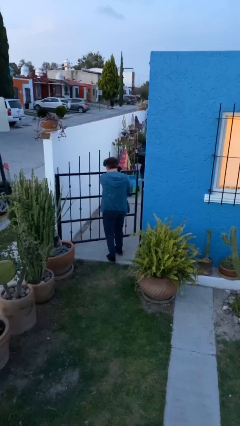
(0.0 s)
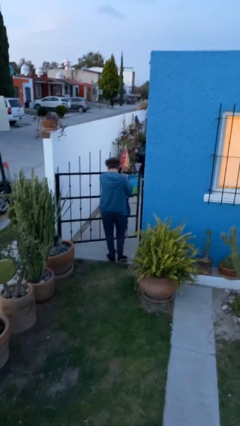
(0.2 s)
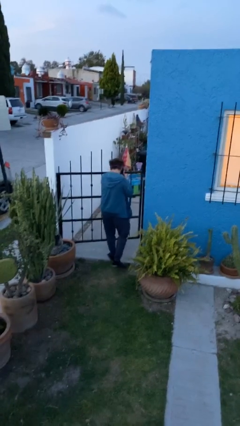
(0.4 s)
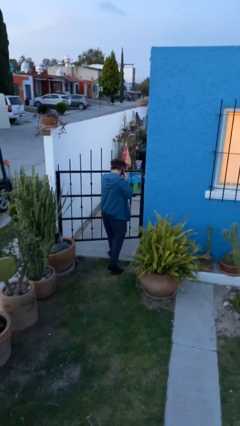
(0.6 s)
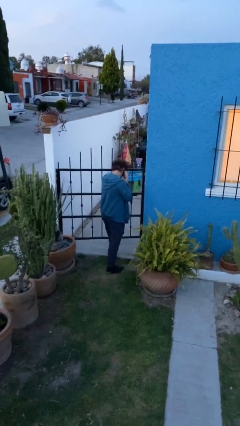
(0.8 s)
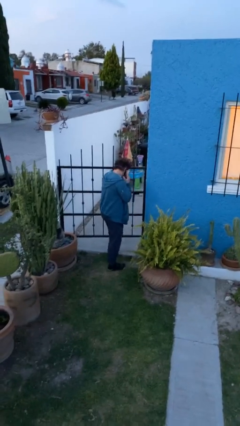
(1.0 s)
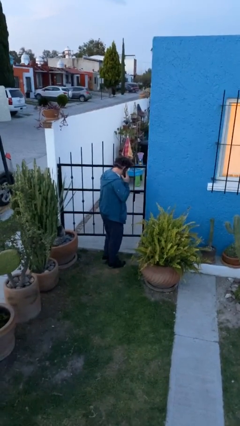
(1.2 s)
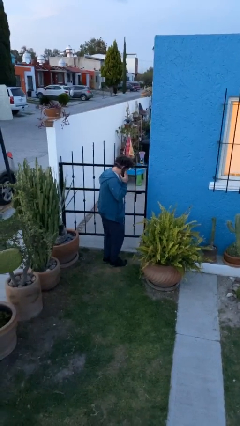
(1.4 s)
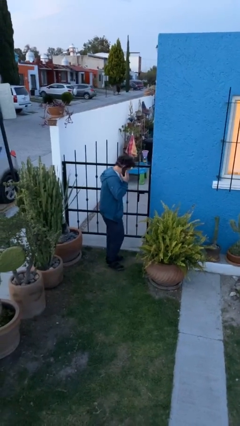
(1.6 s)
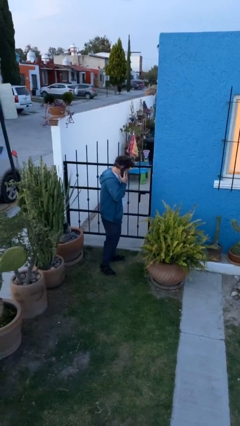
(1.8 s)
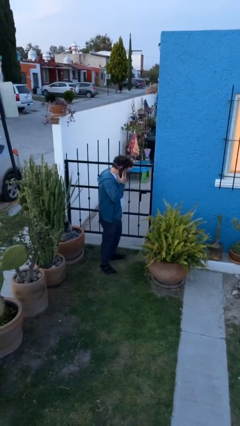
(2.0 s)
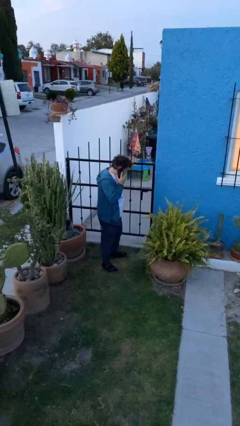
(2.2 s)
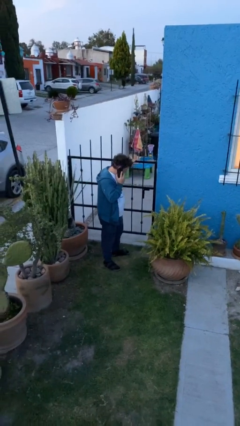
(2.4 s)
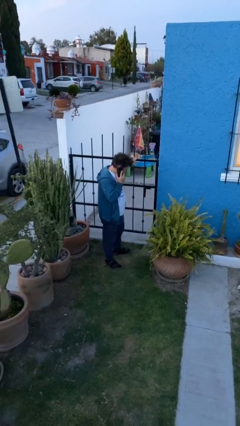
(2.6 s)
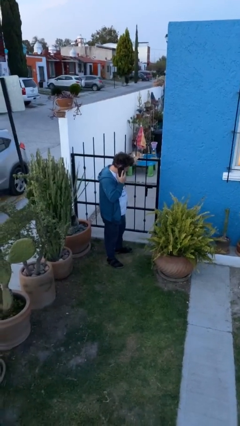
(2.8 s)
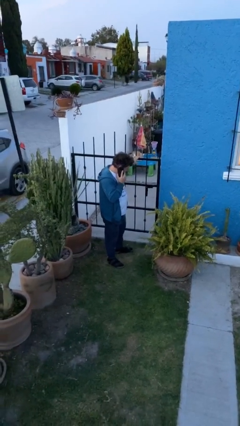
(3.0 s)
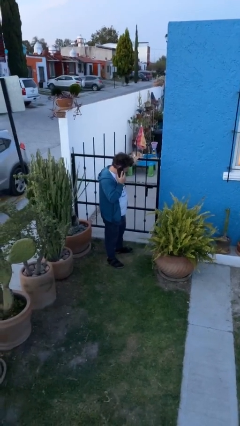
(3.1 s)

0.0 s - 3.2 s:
person closes facility door

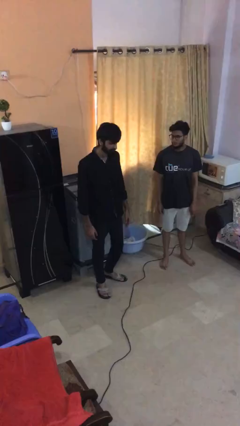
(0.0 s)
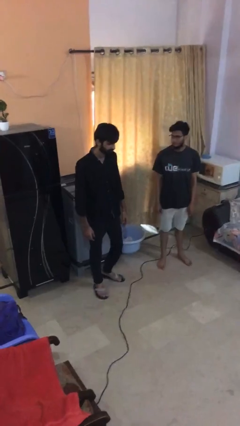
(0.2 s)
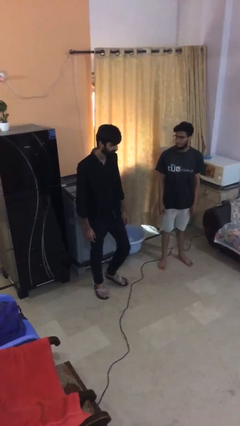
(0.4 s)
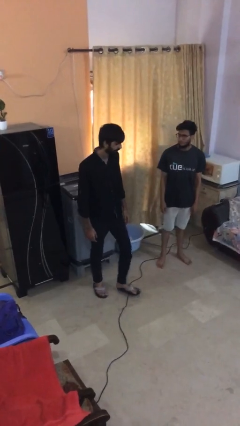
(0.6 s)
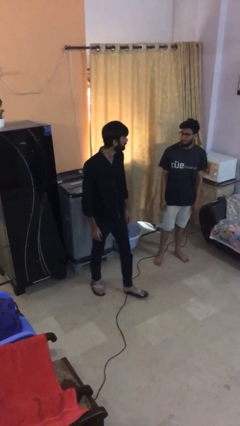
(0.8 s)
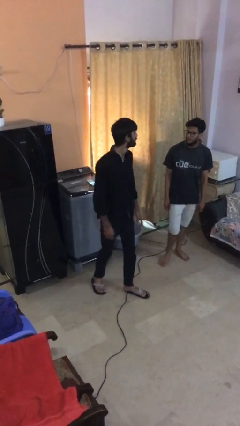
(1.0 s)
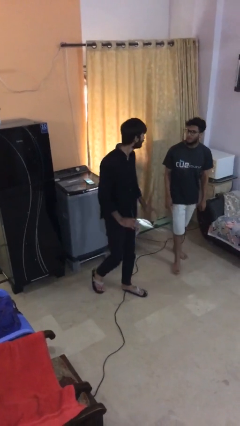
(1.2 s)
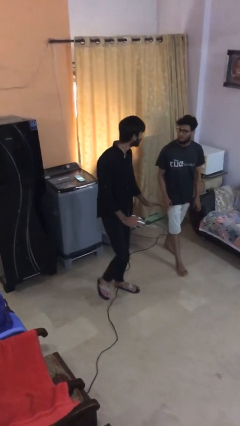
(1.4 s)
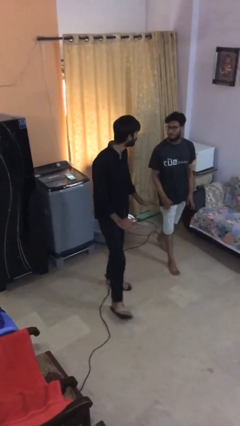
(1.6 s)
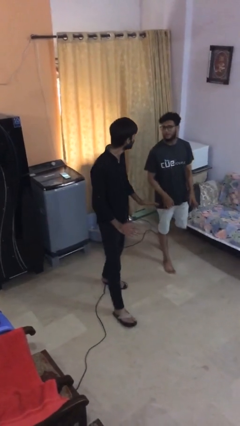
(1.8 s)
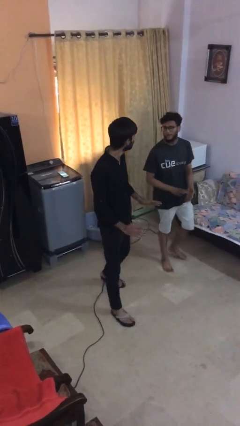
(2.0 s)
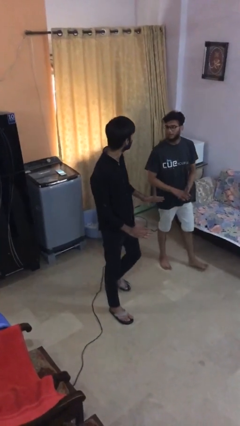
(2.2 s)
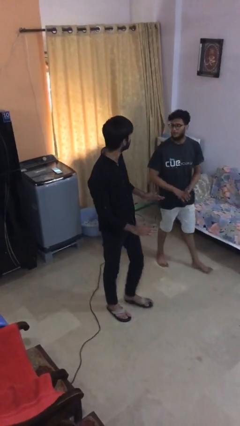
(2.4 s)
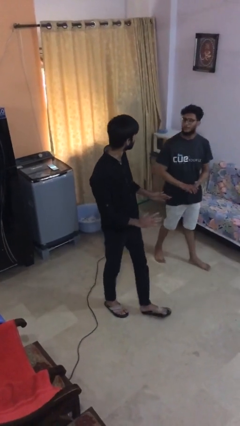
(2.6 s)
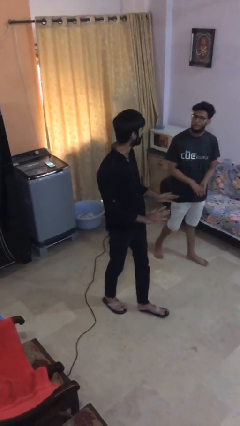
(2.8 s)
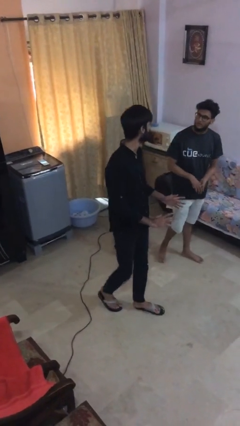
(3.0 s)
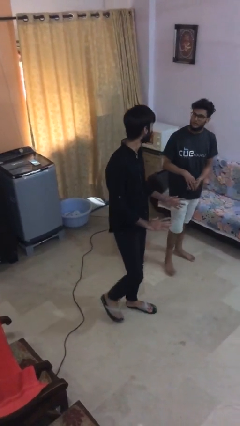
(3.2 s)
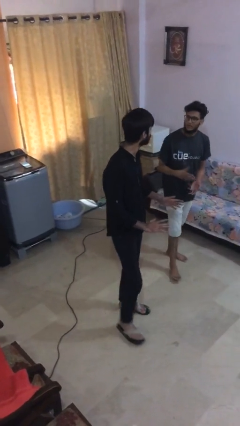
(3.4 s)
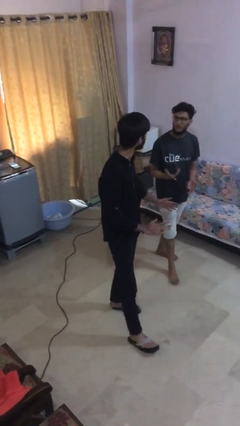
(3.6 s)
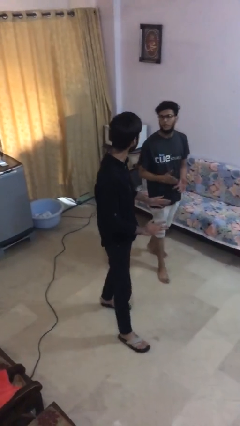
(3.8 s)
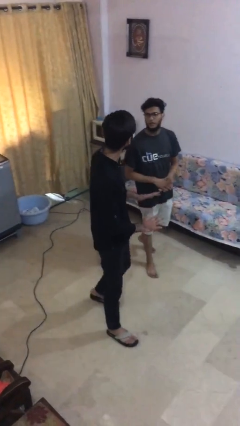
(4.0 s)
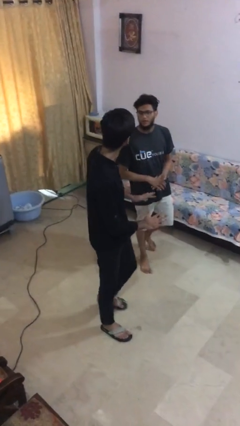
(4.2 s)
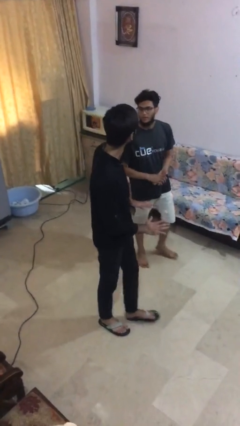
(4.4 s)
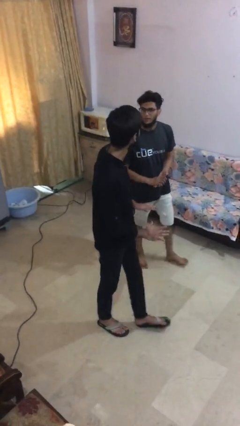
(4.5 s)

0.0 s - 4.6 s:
person talks to person

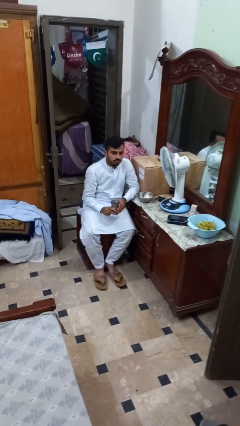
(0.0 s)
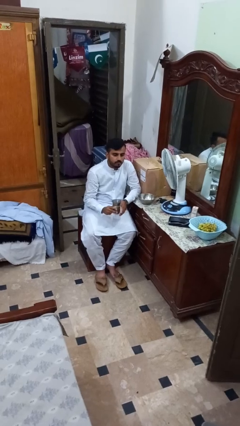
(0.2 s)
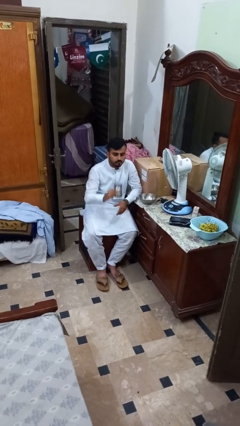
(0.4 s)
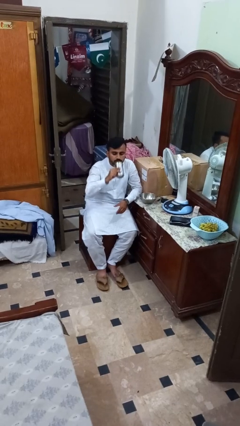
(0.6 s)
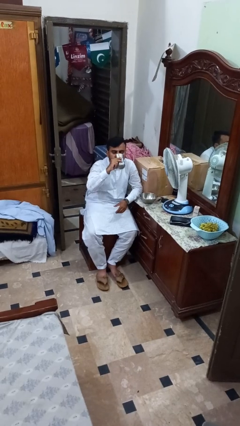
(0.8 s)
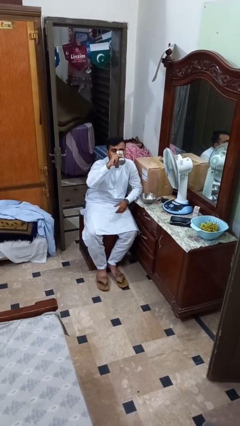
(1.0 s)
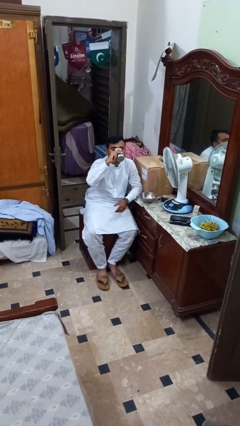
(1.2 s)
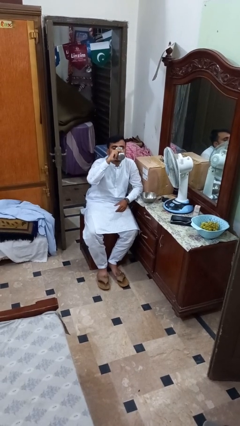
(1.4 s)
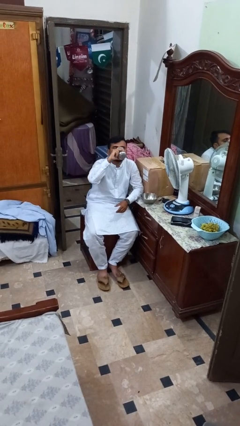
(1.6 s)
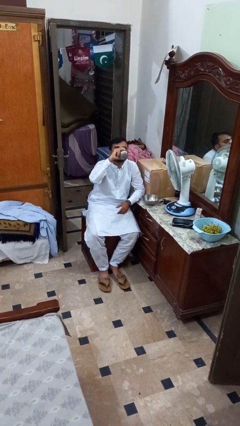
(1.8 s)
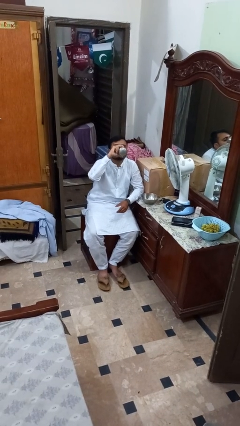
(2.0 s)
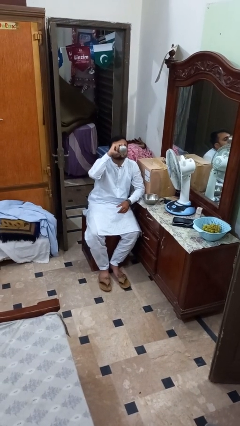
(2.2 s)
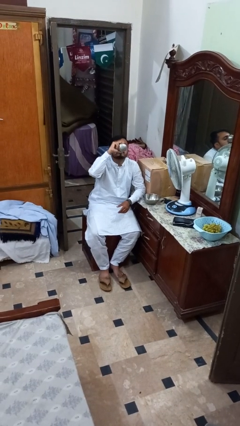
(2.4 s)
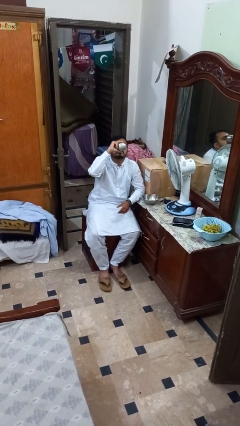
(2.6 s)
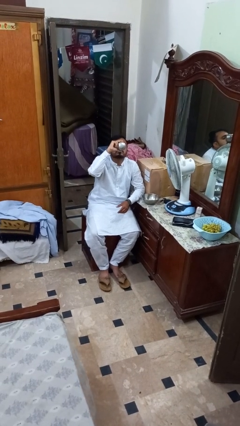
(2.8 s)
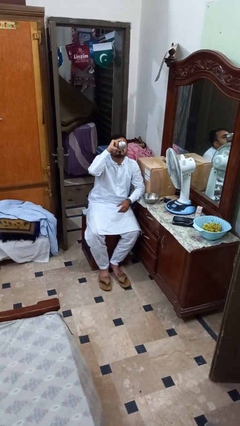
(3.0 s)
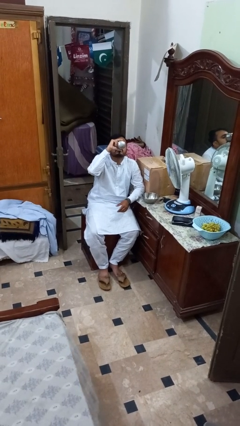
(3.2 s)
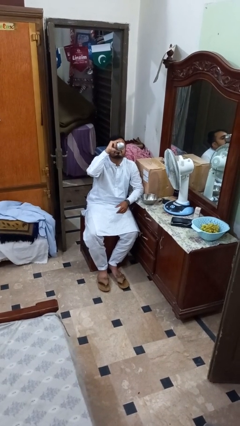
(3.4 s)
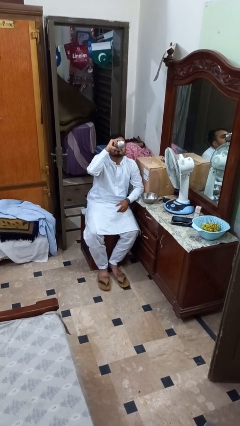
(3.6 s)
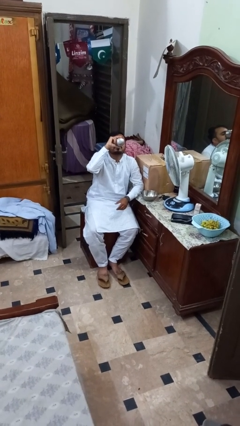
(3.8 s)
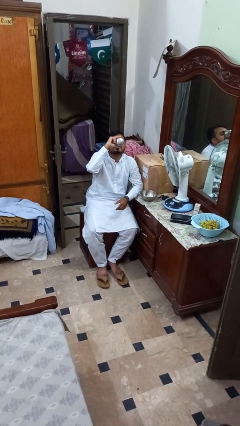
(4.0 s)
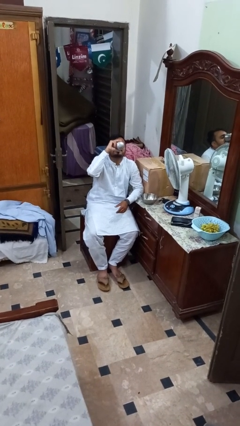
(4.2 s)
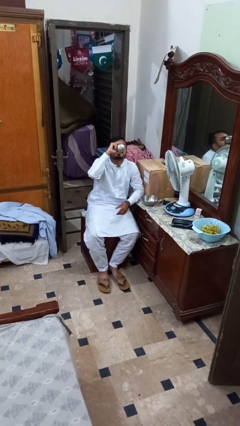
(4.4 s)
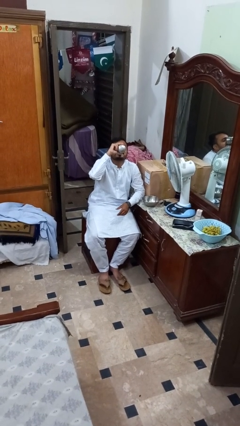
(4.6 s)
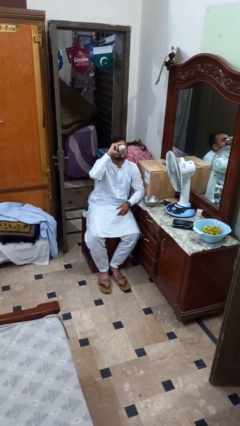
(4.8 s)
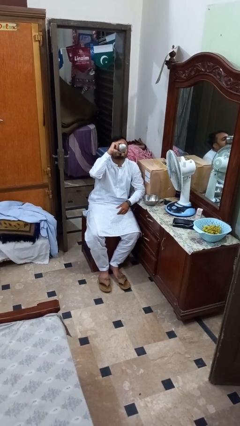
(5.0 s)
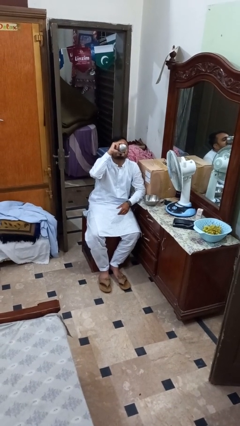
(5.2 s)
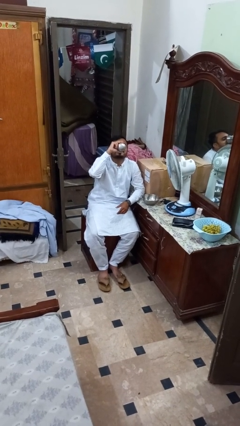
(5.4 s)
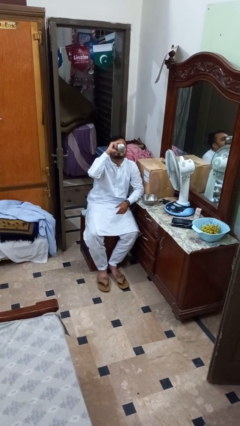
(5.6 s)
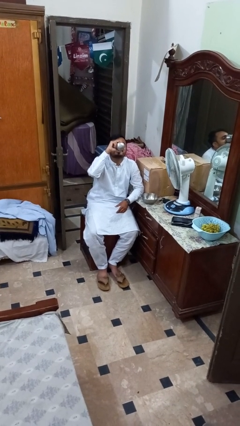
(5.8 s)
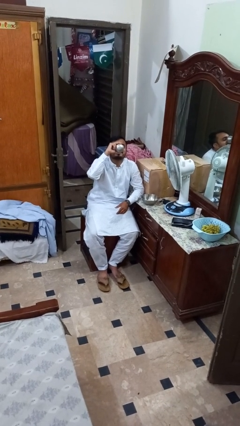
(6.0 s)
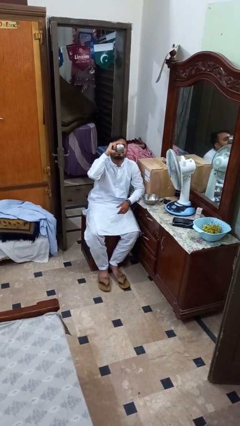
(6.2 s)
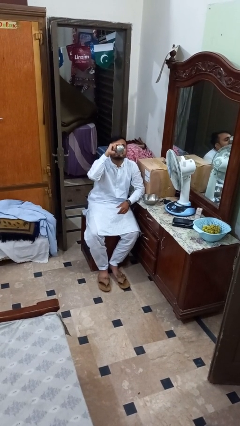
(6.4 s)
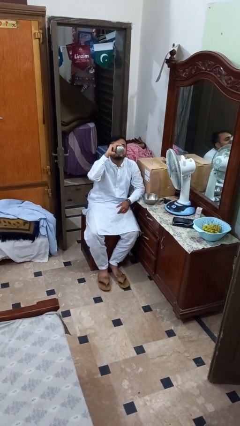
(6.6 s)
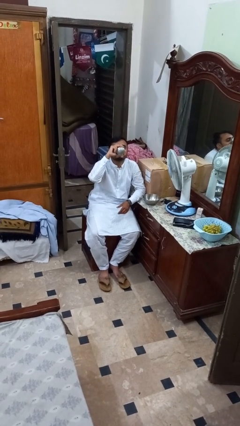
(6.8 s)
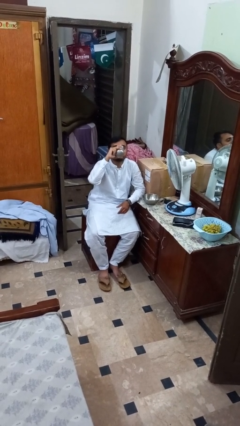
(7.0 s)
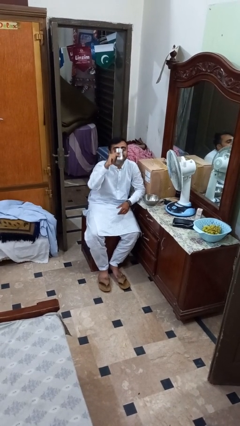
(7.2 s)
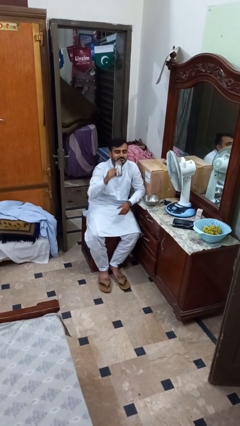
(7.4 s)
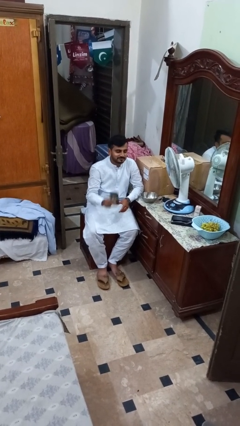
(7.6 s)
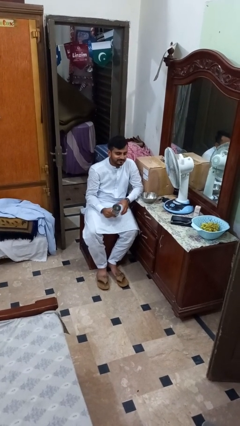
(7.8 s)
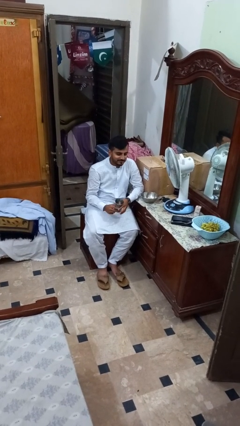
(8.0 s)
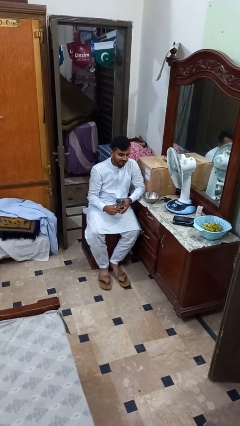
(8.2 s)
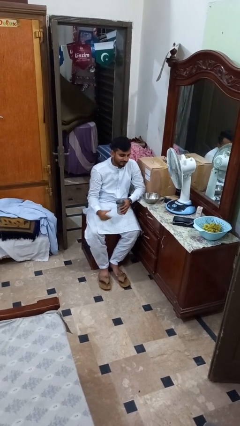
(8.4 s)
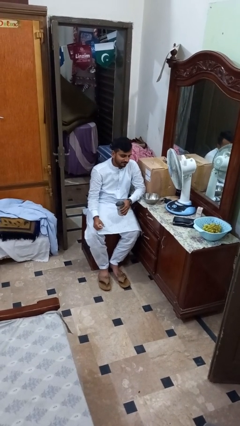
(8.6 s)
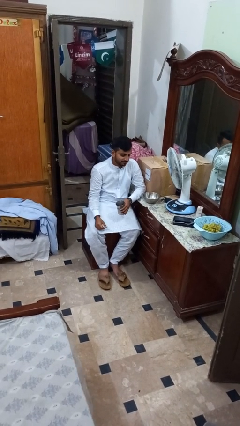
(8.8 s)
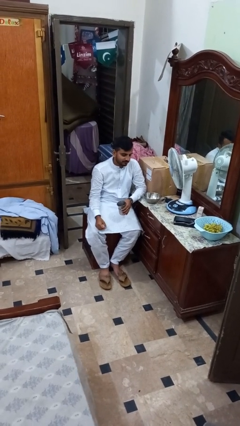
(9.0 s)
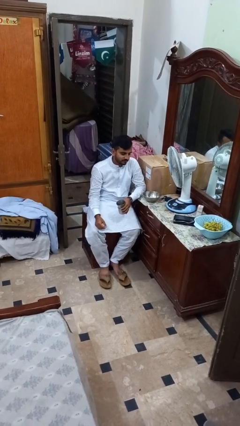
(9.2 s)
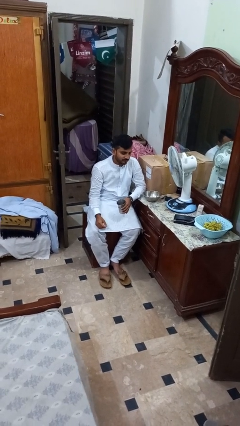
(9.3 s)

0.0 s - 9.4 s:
person drinks from cup

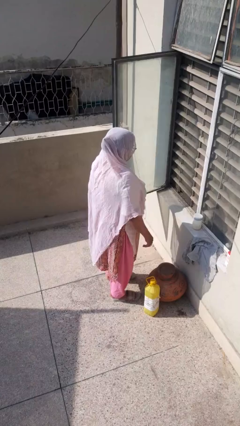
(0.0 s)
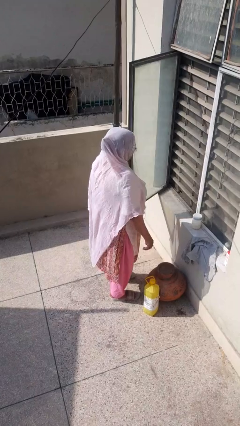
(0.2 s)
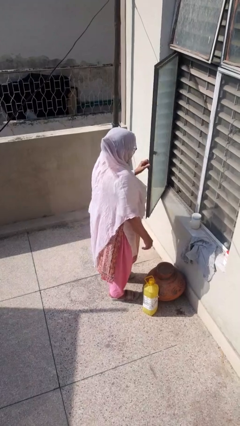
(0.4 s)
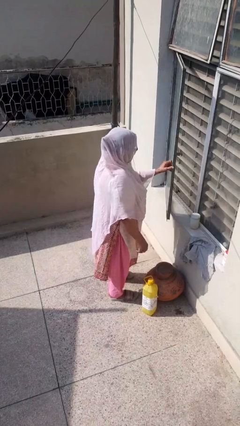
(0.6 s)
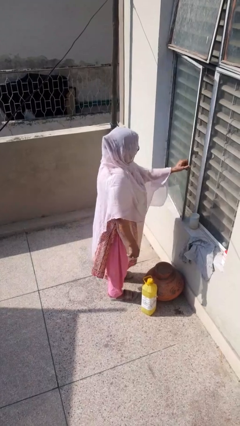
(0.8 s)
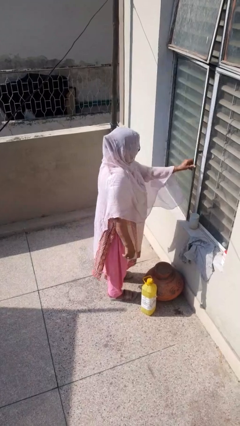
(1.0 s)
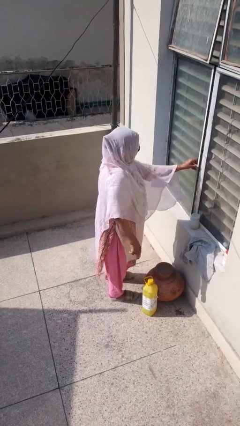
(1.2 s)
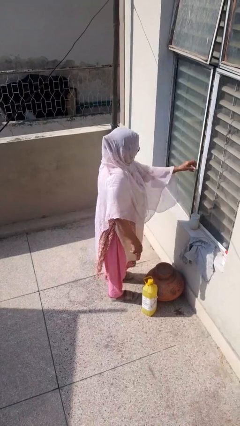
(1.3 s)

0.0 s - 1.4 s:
person closes home window
